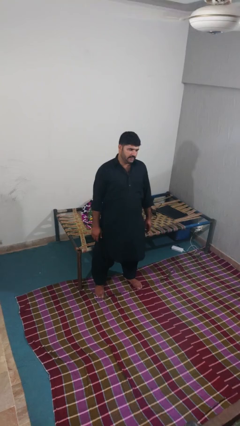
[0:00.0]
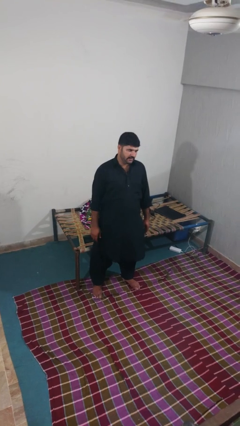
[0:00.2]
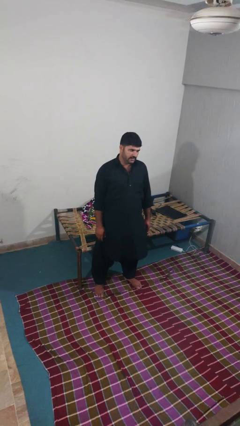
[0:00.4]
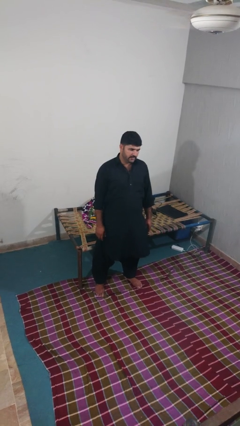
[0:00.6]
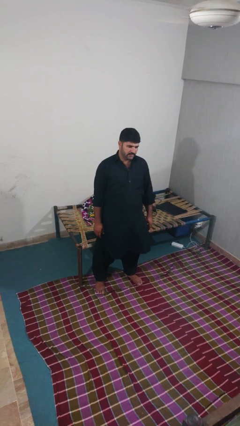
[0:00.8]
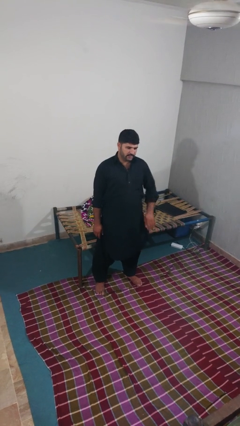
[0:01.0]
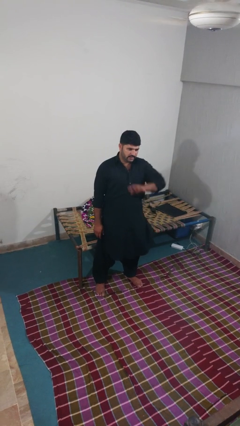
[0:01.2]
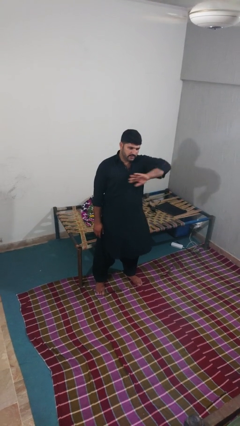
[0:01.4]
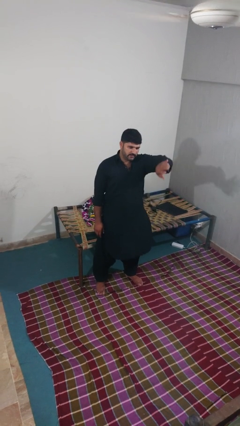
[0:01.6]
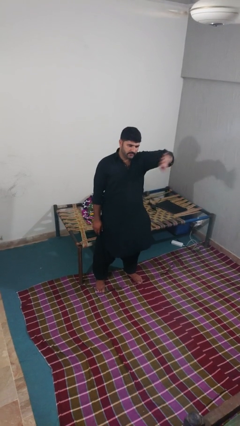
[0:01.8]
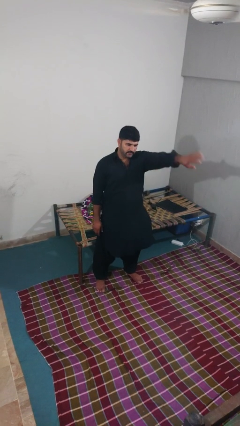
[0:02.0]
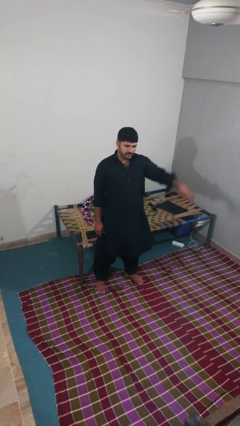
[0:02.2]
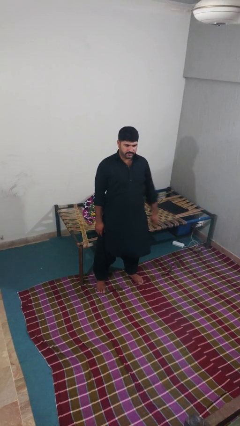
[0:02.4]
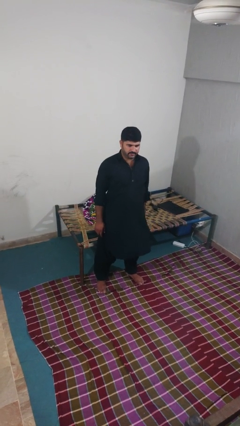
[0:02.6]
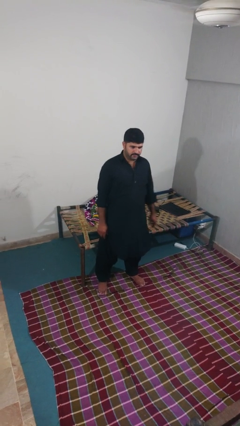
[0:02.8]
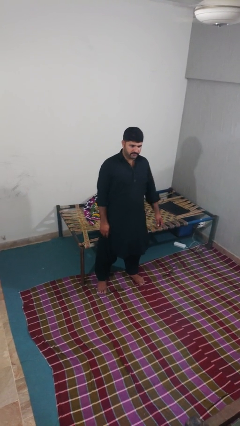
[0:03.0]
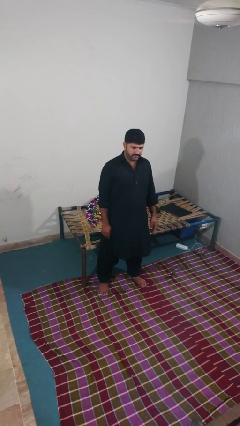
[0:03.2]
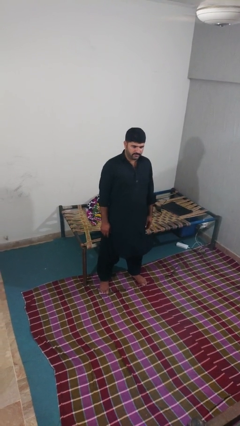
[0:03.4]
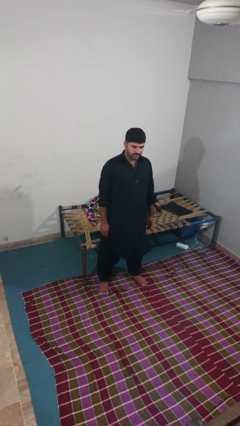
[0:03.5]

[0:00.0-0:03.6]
person gestures swipe left

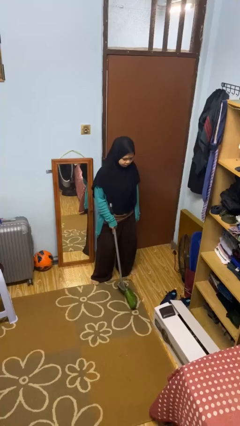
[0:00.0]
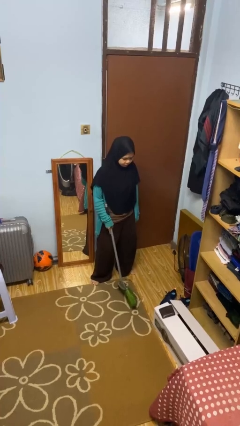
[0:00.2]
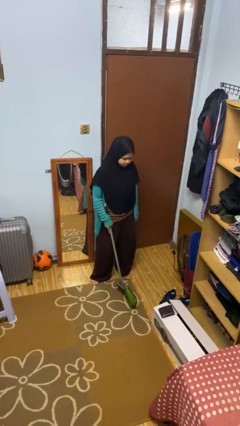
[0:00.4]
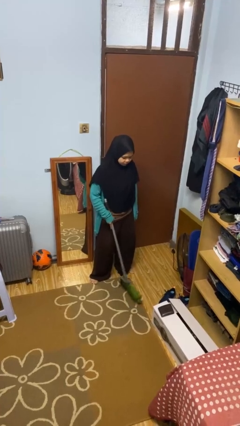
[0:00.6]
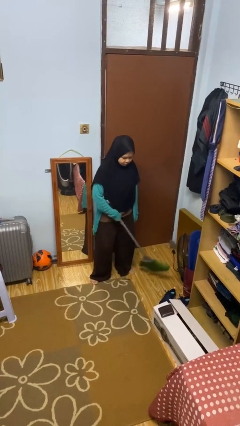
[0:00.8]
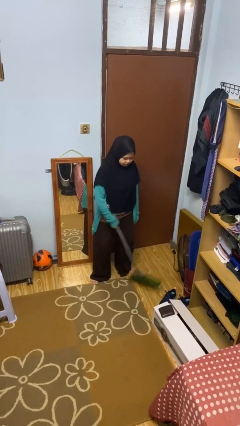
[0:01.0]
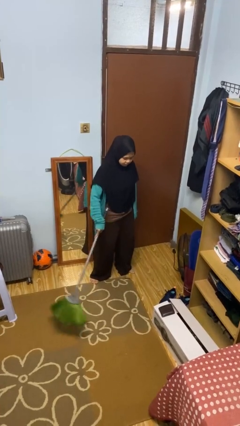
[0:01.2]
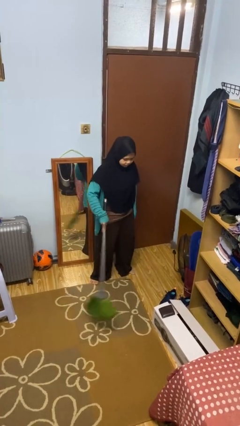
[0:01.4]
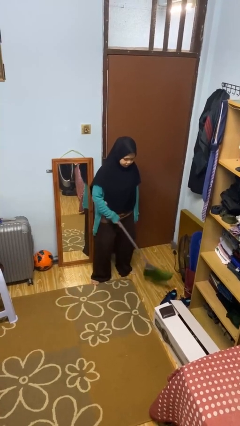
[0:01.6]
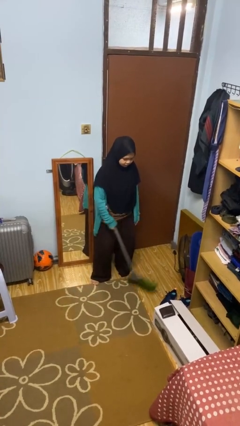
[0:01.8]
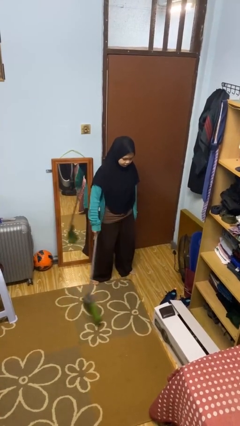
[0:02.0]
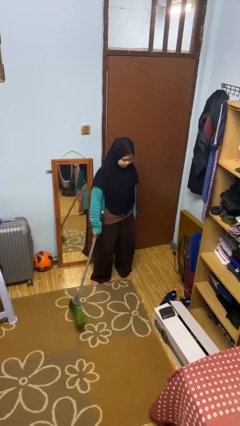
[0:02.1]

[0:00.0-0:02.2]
person sweeps floor

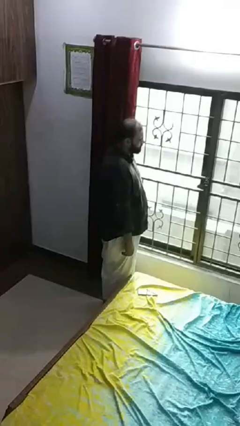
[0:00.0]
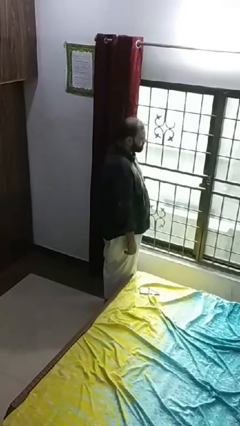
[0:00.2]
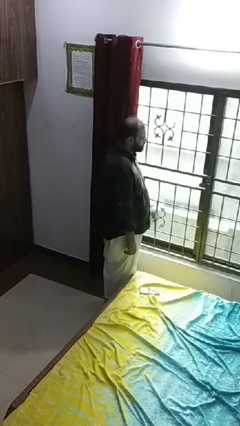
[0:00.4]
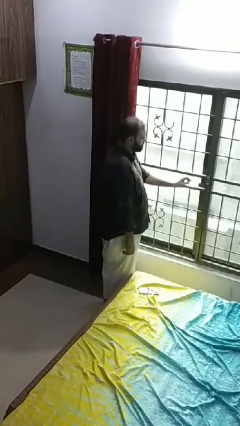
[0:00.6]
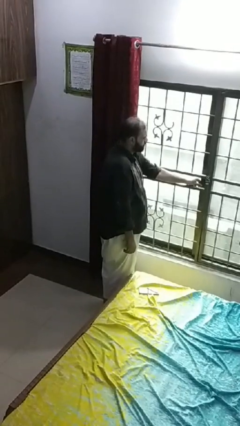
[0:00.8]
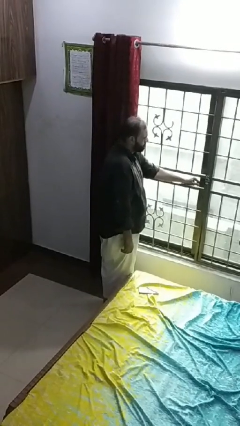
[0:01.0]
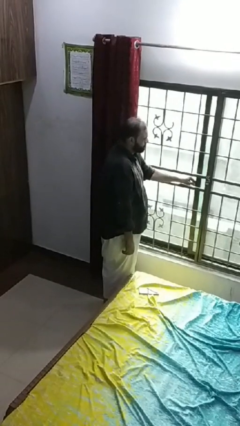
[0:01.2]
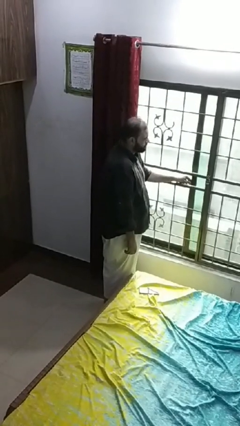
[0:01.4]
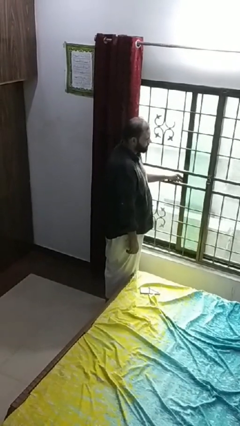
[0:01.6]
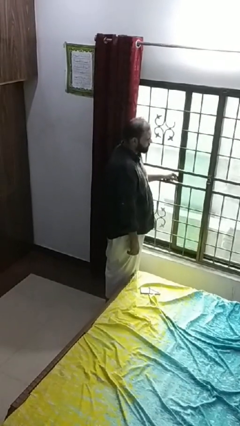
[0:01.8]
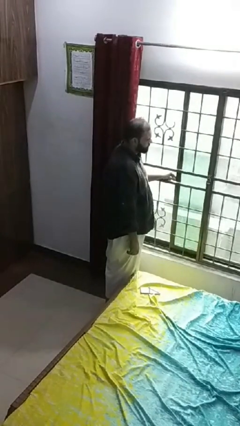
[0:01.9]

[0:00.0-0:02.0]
person opens home window

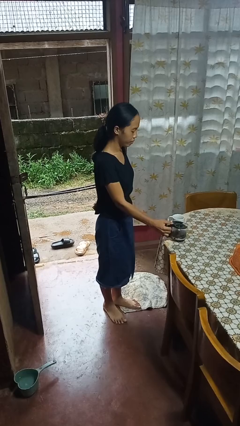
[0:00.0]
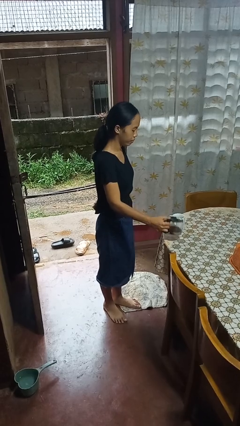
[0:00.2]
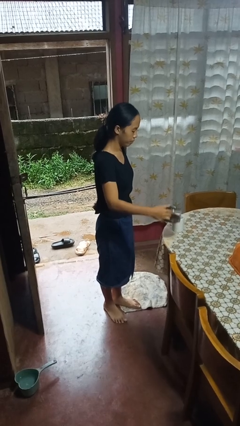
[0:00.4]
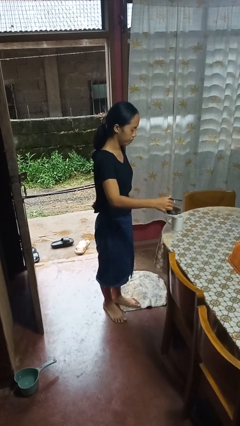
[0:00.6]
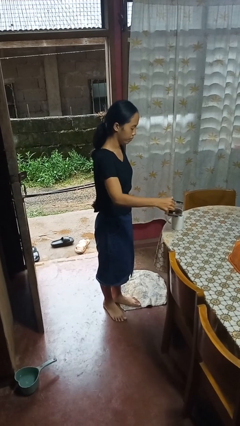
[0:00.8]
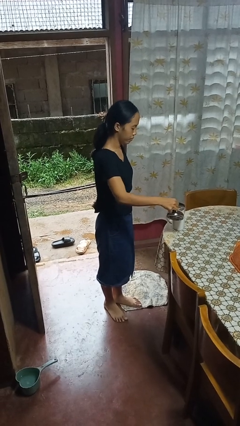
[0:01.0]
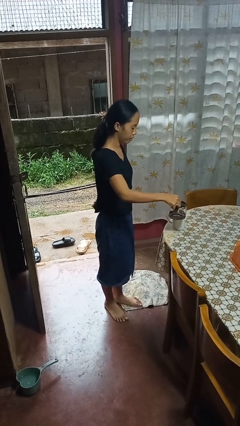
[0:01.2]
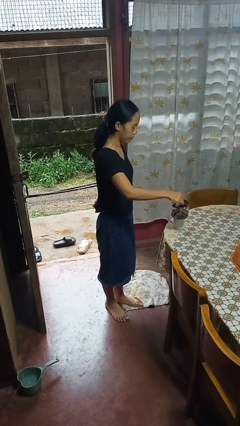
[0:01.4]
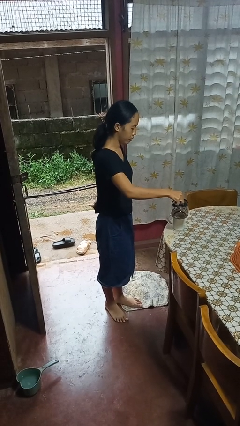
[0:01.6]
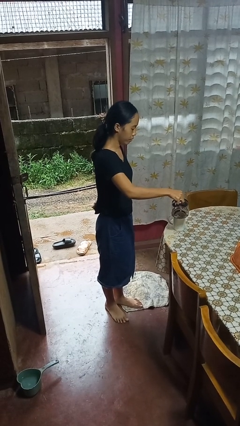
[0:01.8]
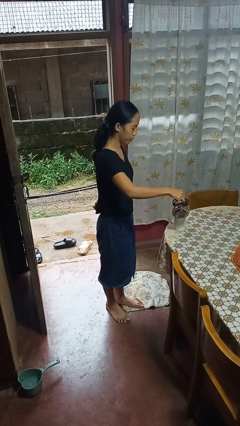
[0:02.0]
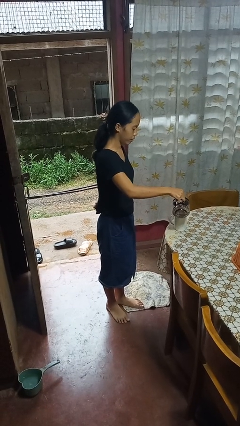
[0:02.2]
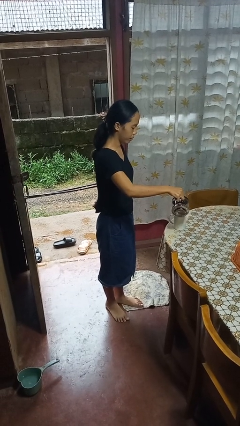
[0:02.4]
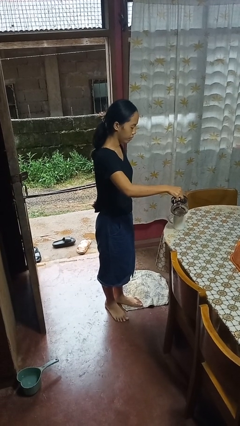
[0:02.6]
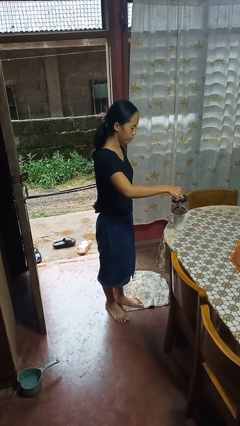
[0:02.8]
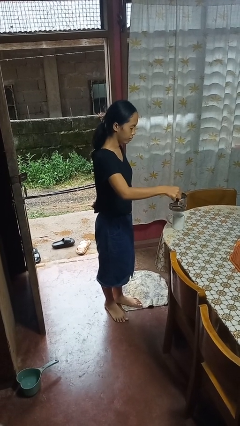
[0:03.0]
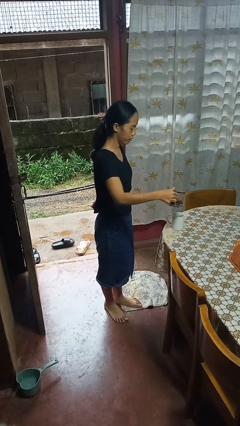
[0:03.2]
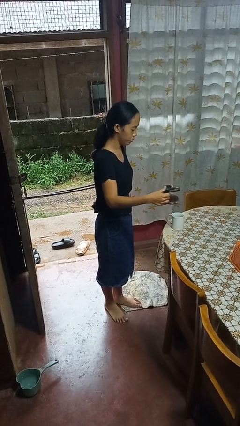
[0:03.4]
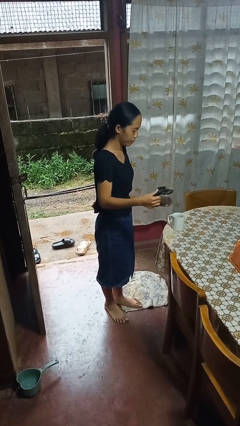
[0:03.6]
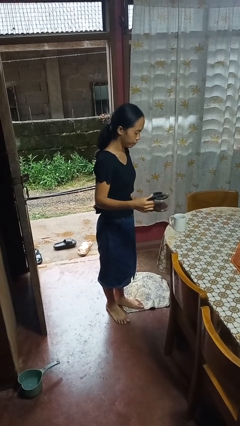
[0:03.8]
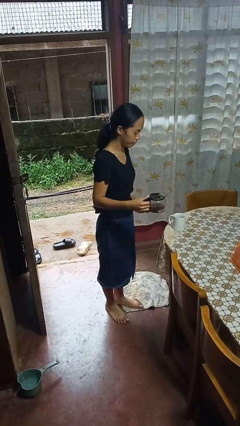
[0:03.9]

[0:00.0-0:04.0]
person pours coffee into mug

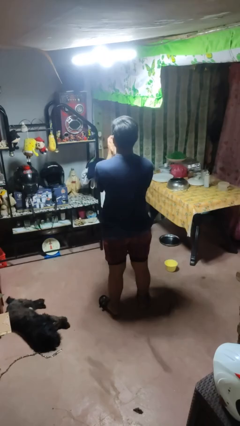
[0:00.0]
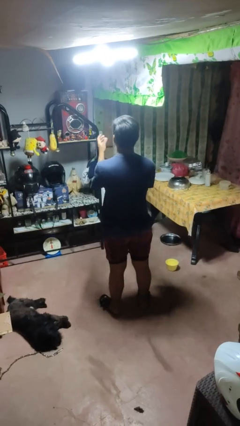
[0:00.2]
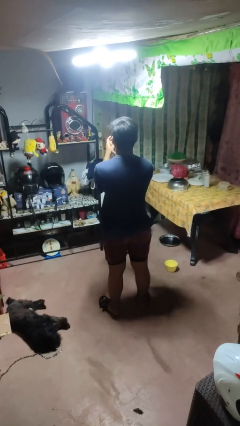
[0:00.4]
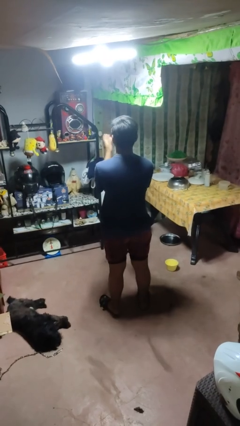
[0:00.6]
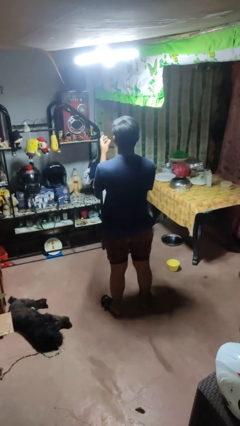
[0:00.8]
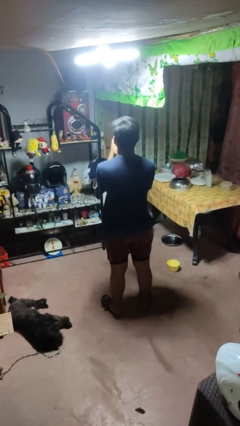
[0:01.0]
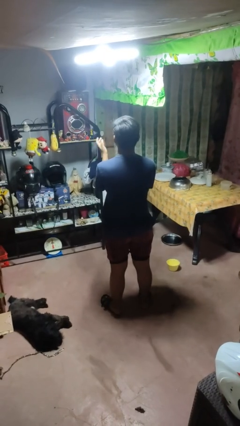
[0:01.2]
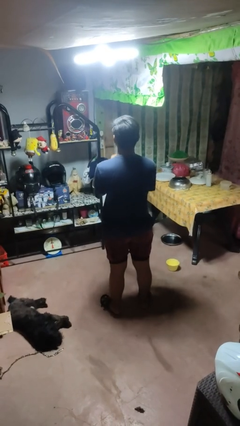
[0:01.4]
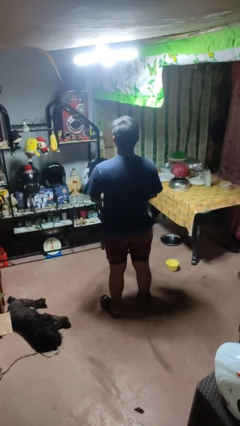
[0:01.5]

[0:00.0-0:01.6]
person claps hands

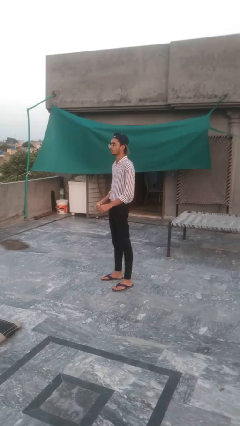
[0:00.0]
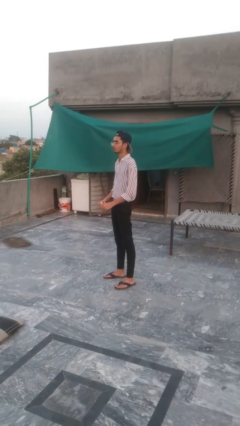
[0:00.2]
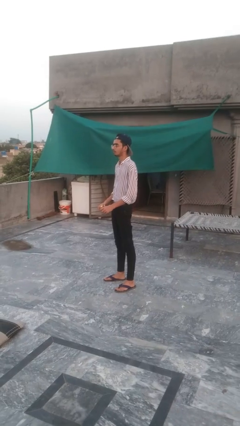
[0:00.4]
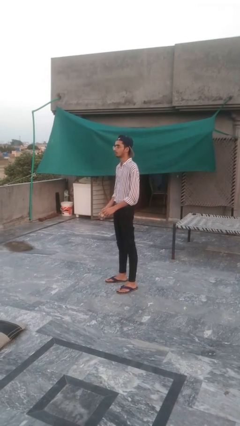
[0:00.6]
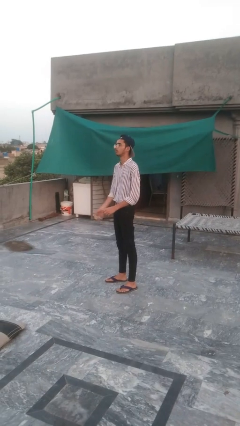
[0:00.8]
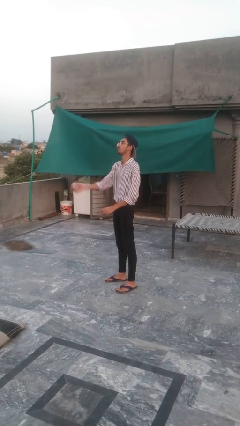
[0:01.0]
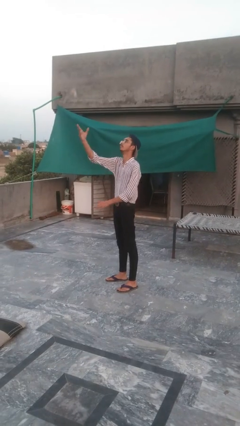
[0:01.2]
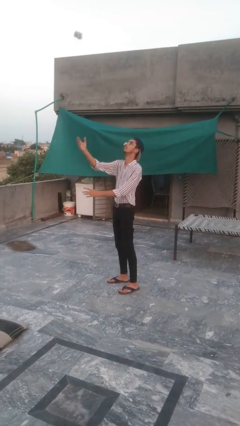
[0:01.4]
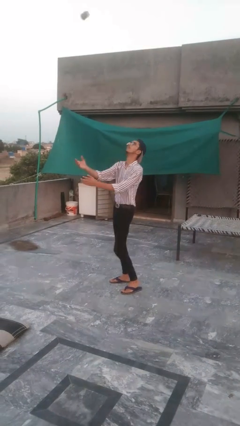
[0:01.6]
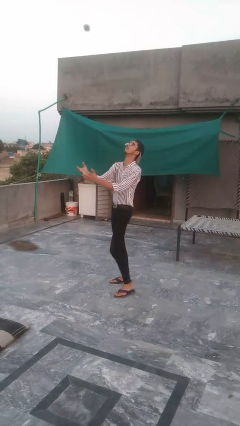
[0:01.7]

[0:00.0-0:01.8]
person drops object

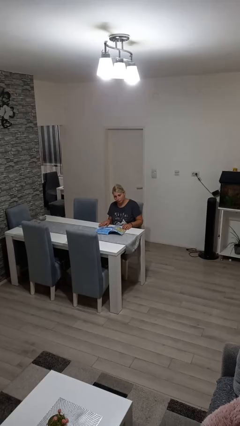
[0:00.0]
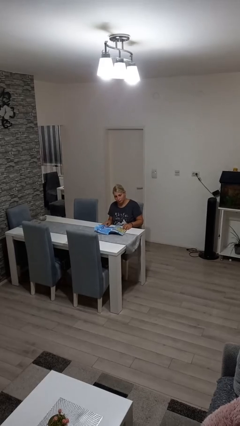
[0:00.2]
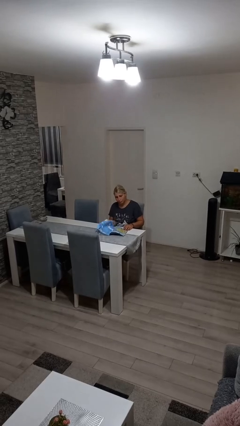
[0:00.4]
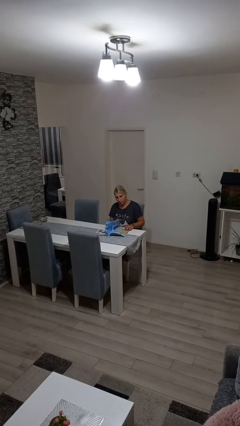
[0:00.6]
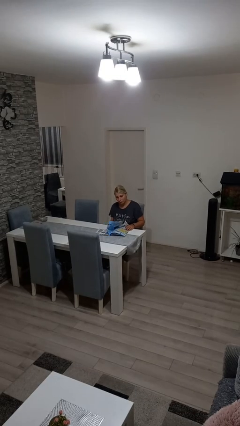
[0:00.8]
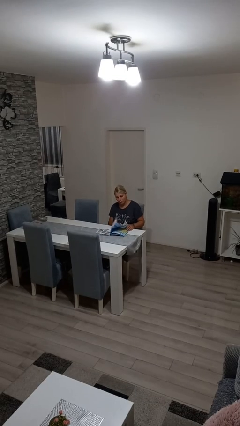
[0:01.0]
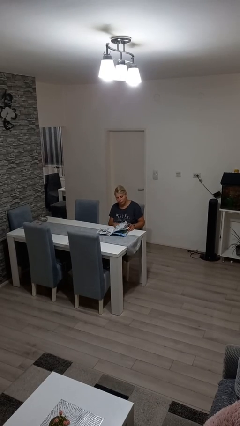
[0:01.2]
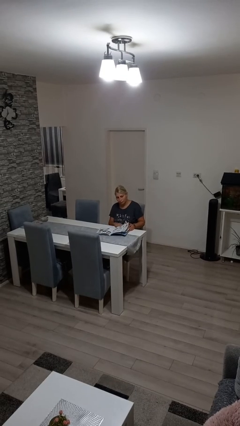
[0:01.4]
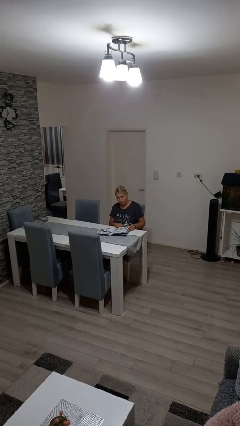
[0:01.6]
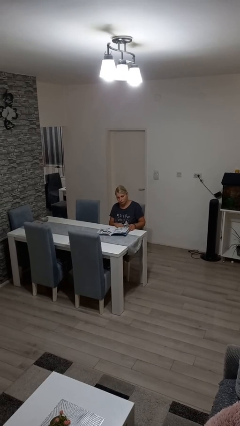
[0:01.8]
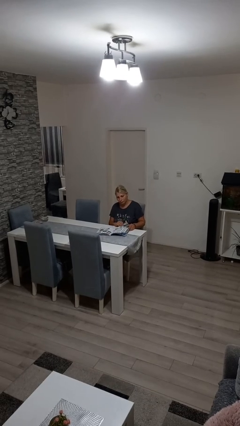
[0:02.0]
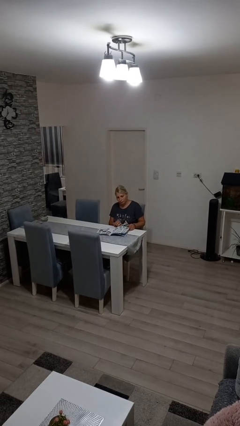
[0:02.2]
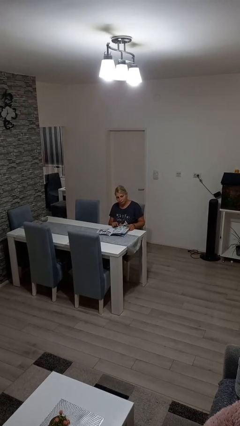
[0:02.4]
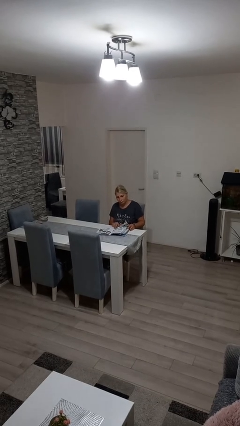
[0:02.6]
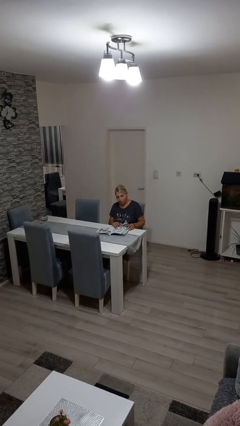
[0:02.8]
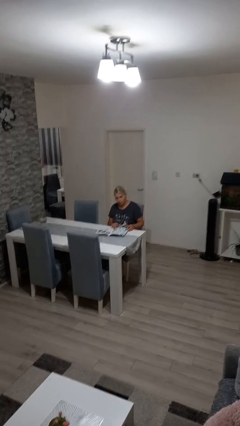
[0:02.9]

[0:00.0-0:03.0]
person reads magazine
